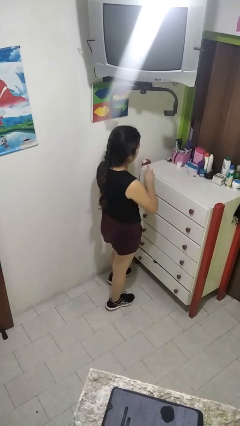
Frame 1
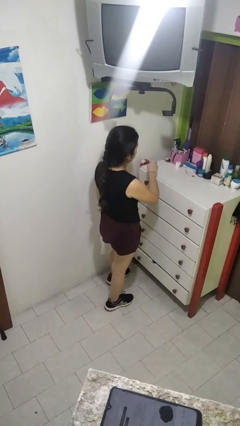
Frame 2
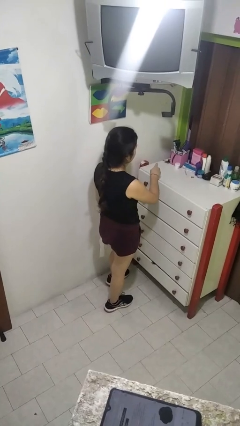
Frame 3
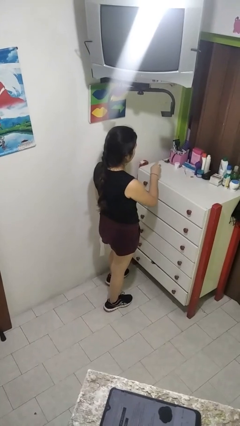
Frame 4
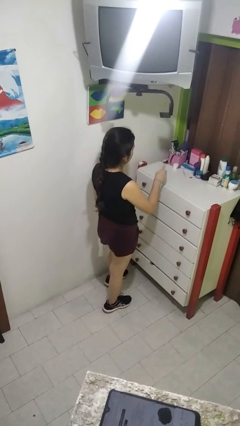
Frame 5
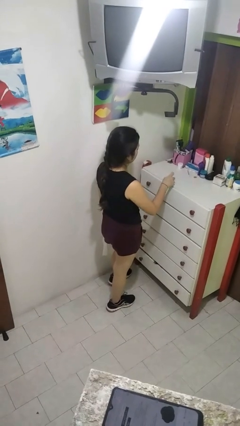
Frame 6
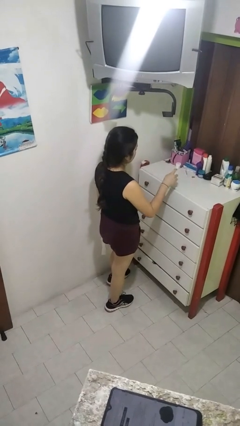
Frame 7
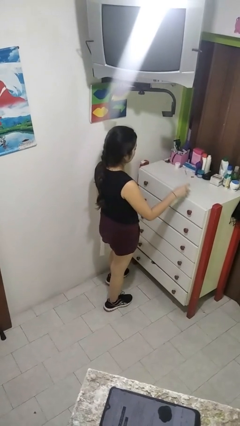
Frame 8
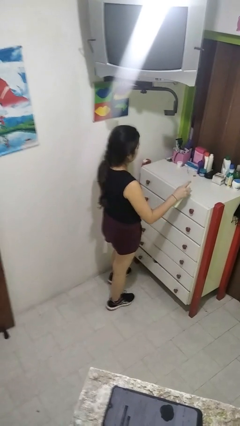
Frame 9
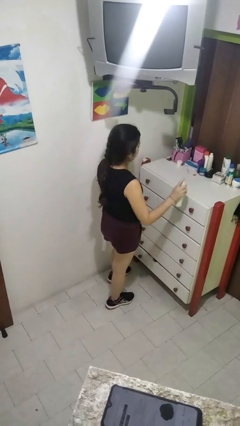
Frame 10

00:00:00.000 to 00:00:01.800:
person sprays from bottle

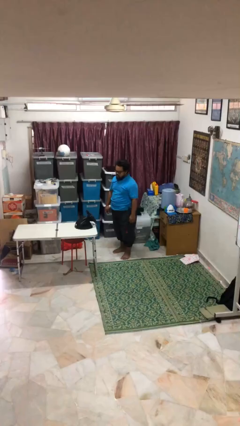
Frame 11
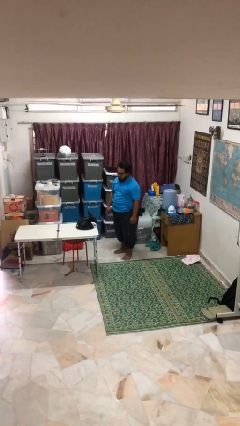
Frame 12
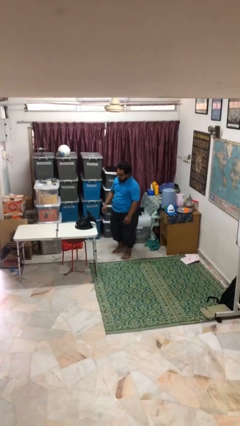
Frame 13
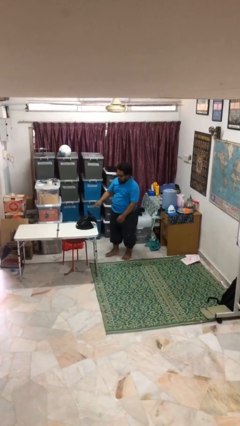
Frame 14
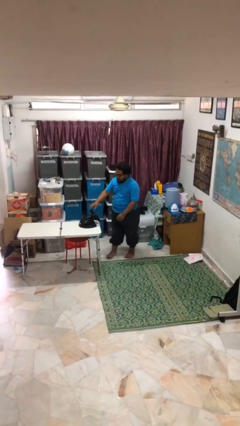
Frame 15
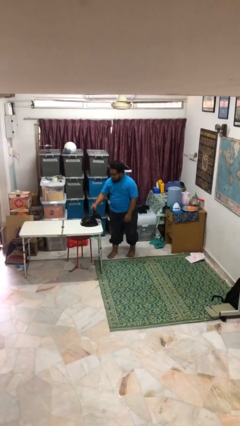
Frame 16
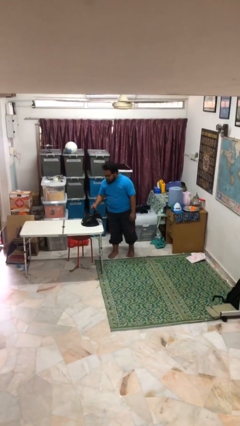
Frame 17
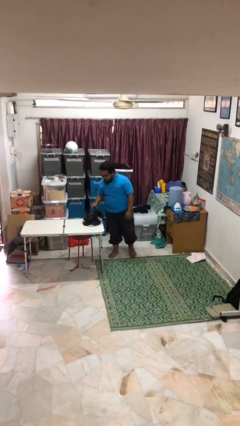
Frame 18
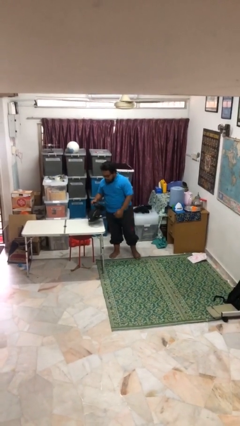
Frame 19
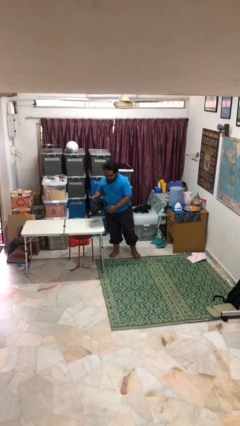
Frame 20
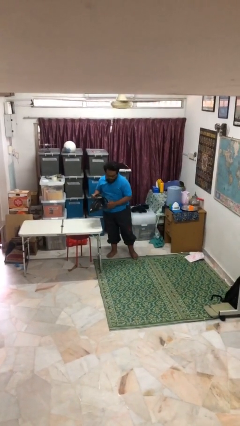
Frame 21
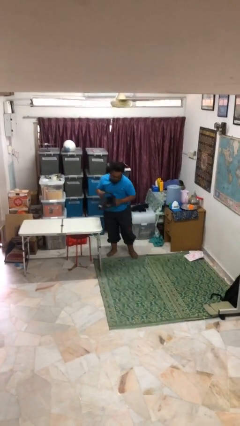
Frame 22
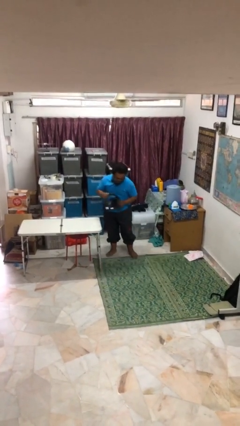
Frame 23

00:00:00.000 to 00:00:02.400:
person picks up object from table

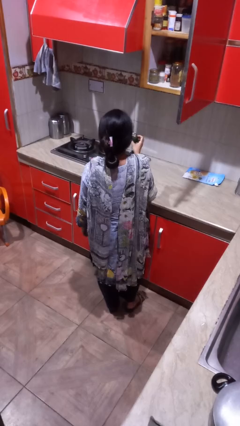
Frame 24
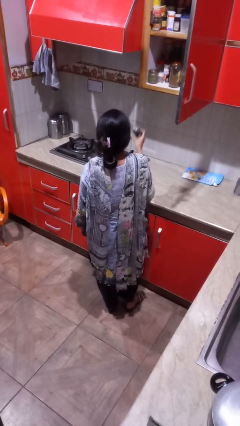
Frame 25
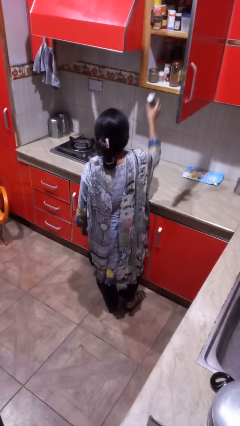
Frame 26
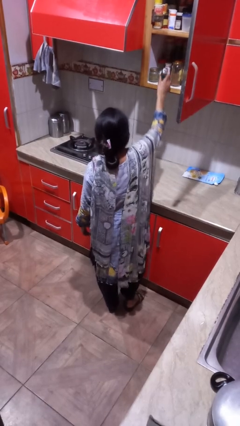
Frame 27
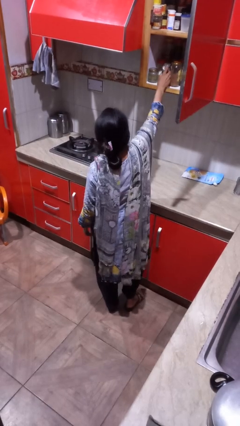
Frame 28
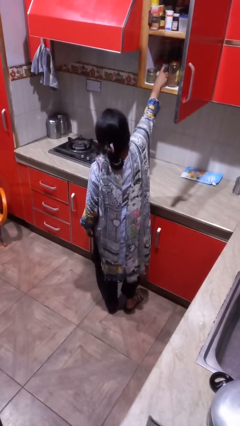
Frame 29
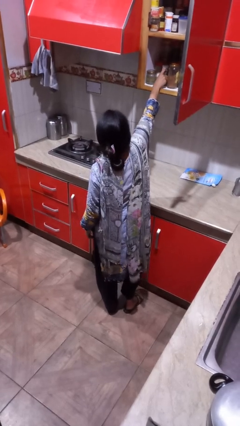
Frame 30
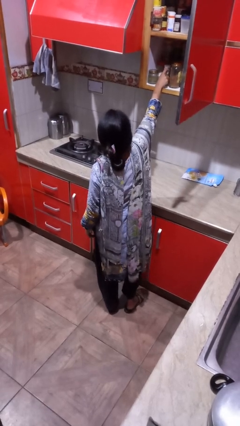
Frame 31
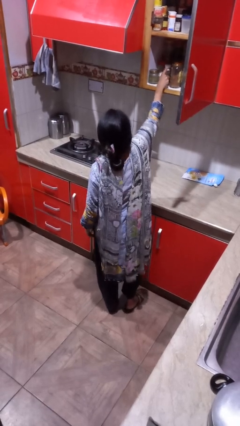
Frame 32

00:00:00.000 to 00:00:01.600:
person puts object in cabinet

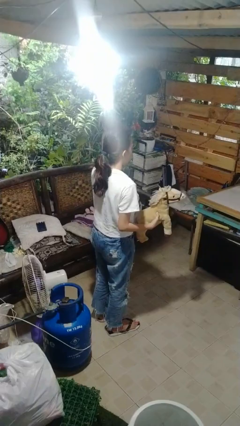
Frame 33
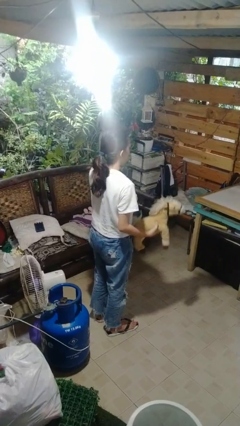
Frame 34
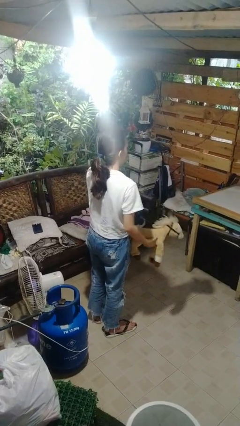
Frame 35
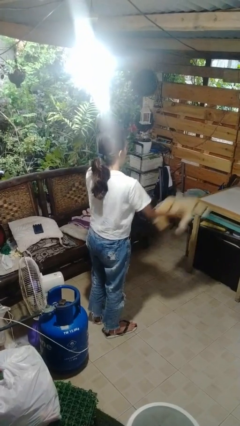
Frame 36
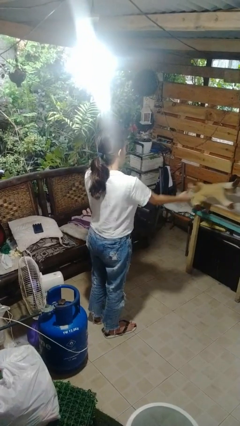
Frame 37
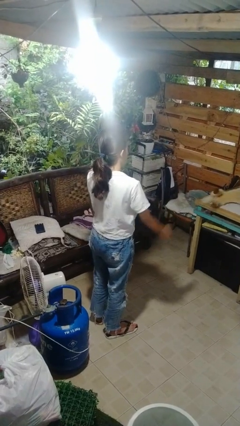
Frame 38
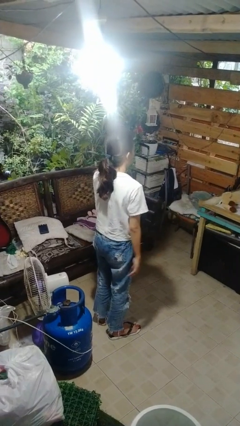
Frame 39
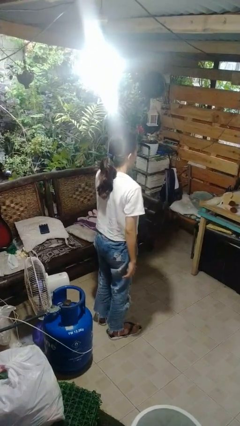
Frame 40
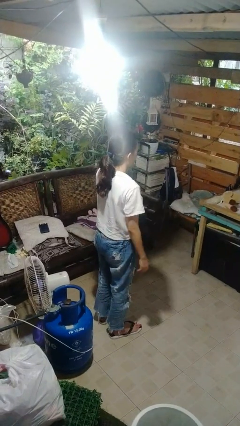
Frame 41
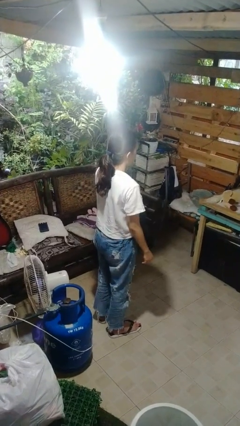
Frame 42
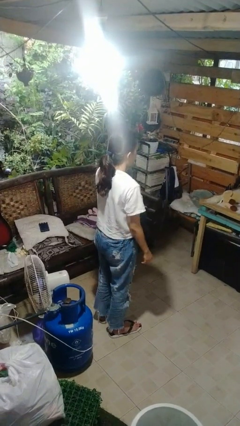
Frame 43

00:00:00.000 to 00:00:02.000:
person throws object on table

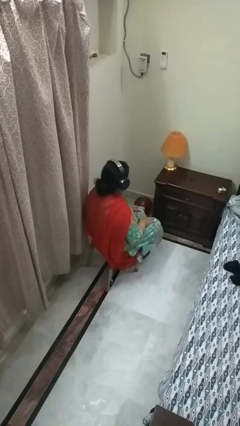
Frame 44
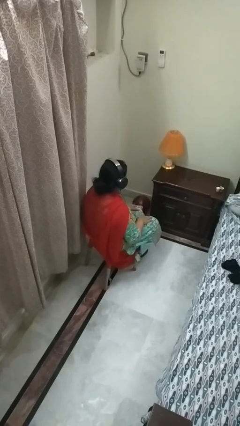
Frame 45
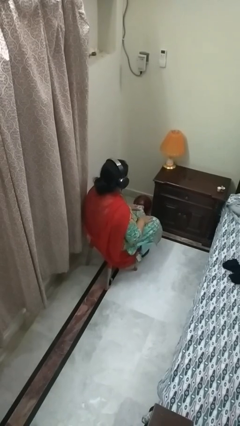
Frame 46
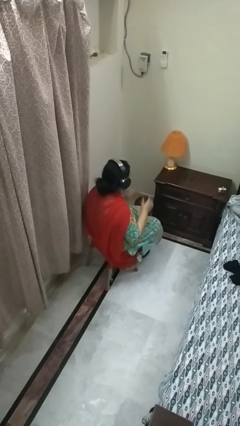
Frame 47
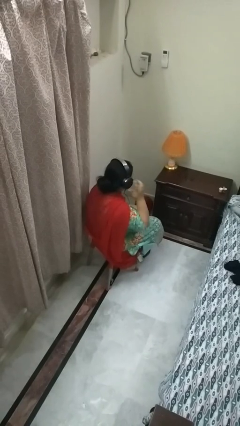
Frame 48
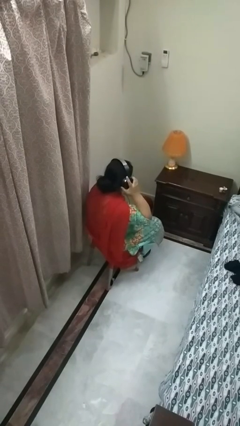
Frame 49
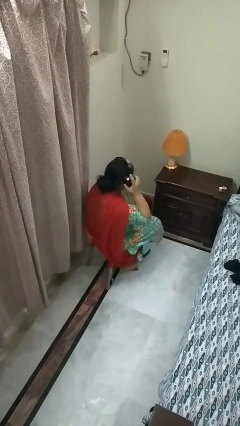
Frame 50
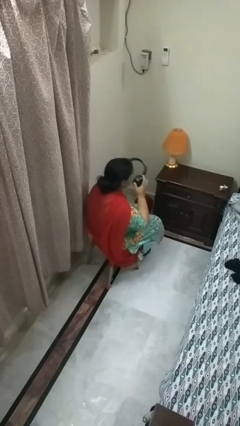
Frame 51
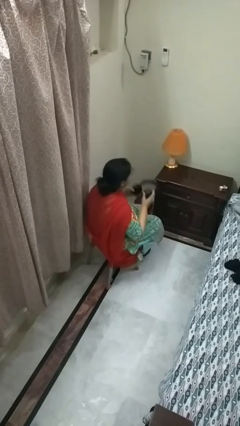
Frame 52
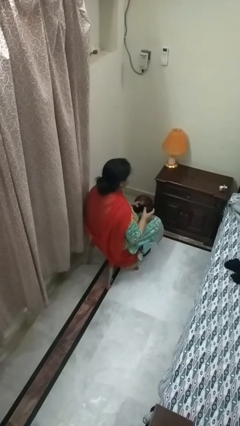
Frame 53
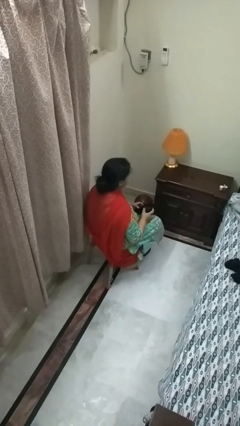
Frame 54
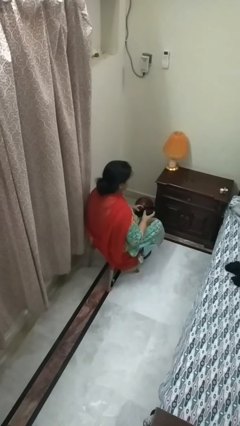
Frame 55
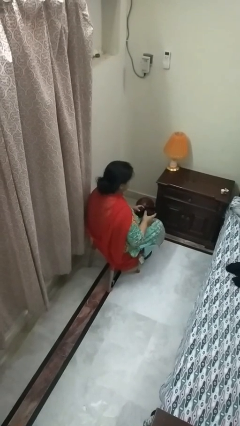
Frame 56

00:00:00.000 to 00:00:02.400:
person takes off headphones

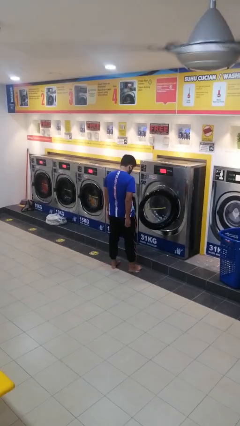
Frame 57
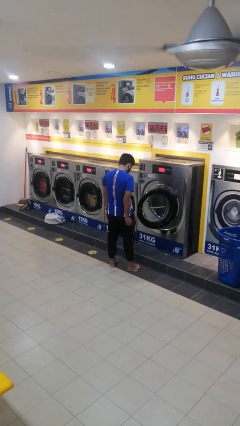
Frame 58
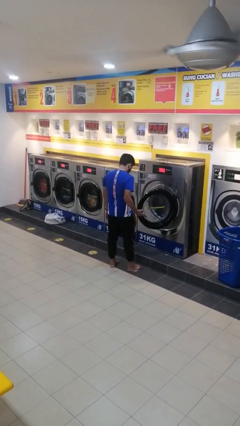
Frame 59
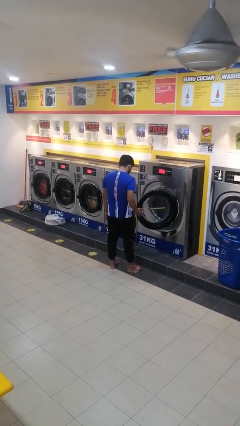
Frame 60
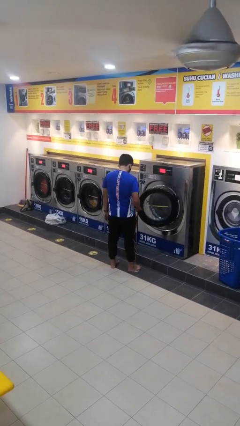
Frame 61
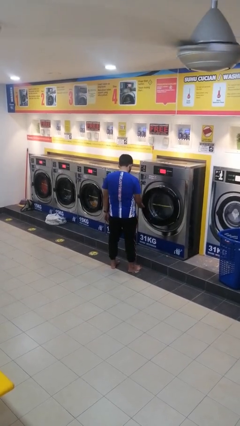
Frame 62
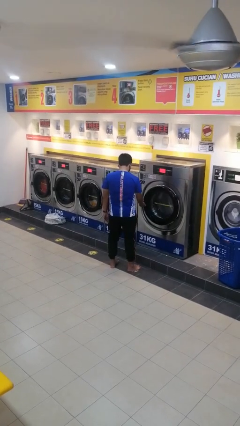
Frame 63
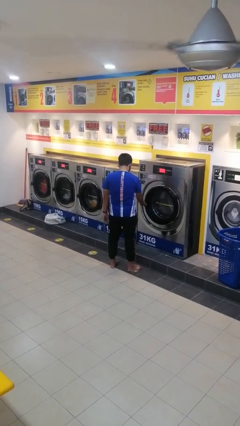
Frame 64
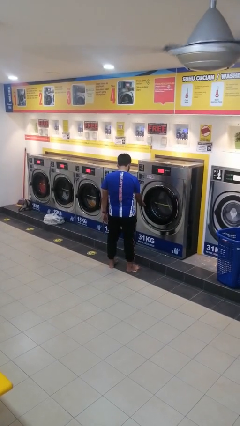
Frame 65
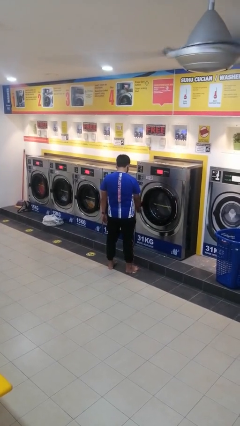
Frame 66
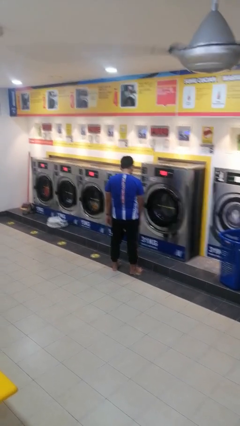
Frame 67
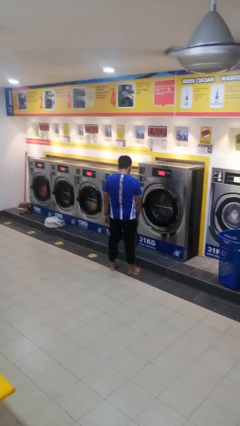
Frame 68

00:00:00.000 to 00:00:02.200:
person closes clothes washer

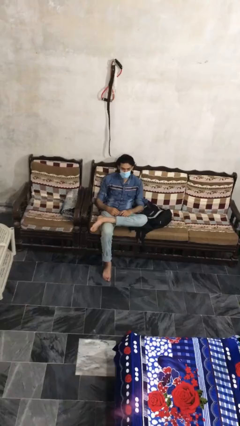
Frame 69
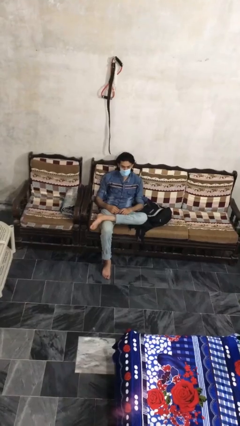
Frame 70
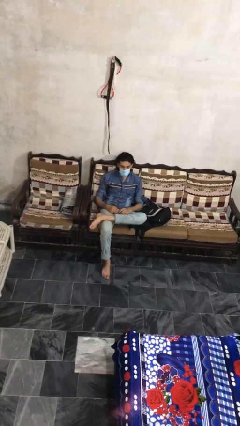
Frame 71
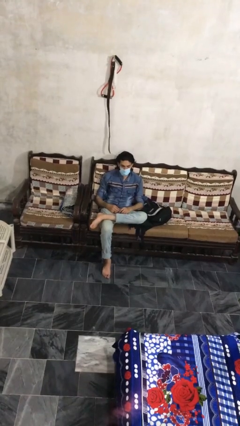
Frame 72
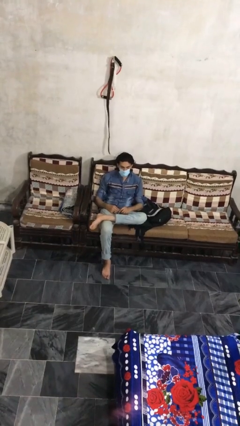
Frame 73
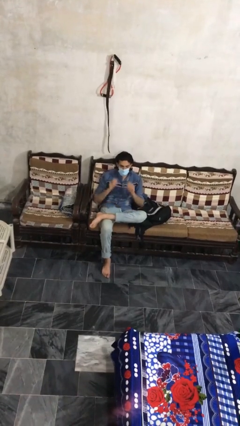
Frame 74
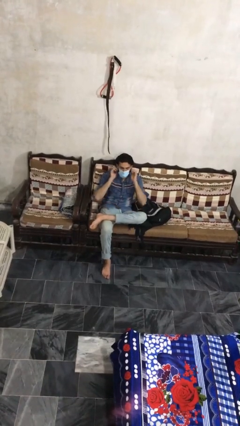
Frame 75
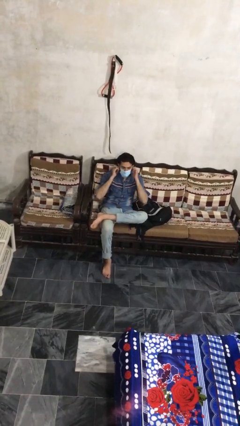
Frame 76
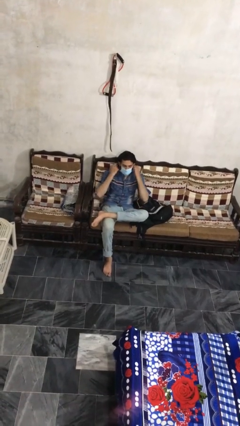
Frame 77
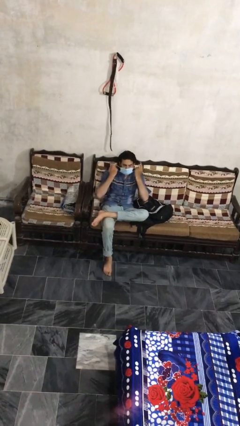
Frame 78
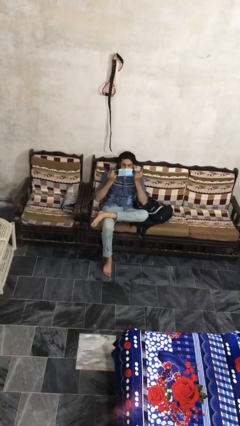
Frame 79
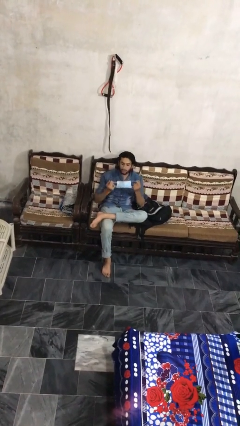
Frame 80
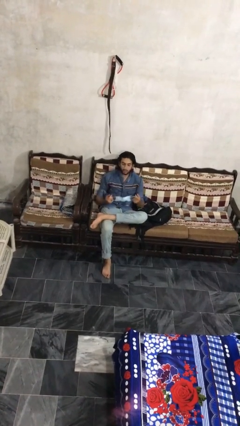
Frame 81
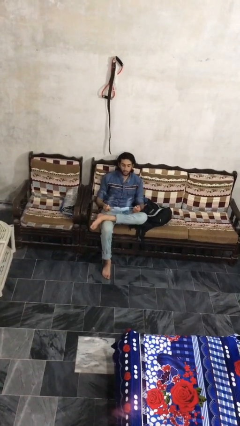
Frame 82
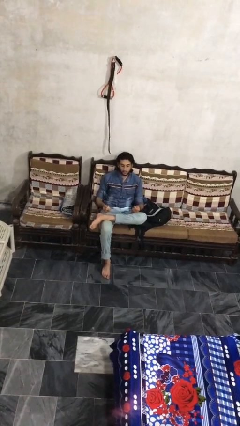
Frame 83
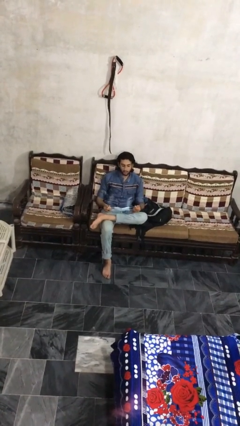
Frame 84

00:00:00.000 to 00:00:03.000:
person takes off facemask

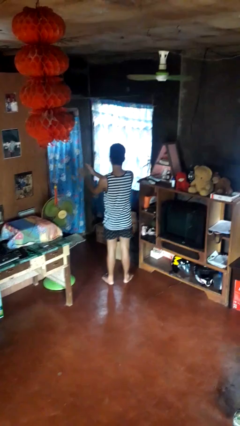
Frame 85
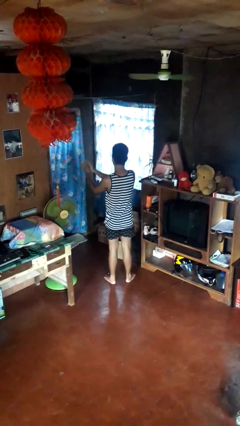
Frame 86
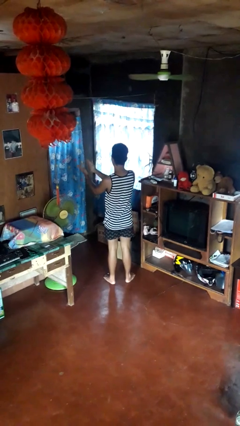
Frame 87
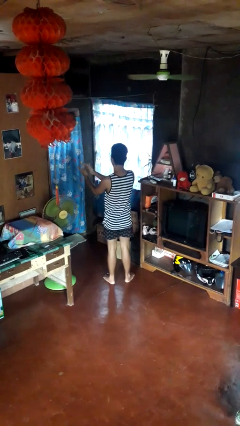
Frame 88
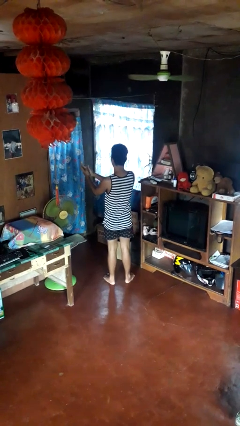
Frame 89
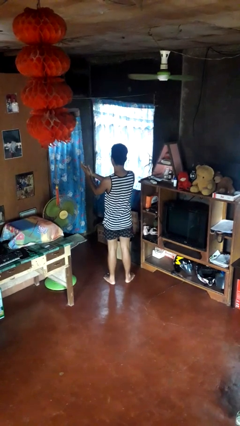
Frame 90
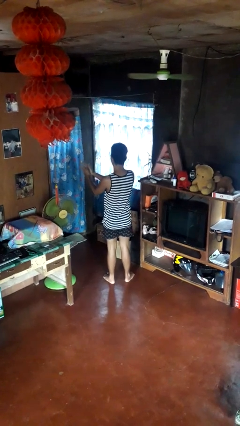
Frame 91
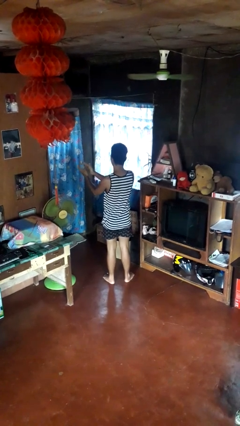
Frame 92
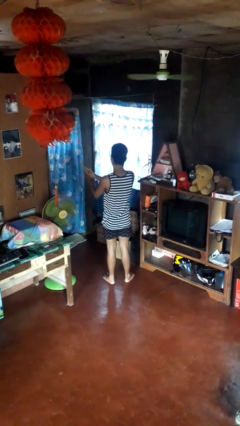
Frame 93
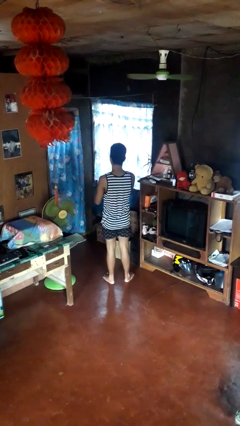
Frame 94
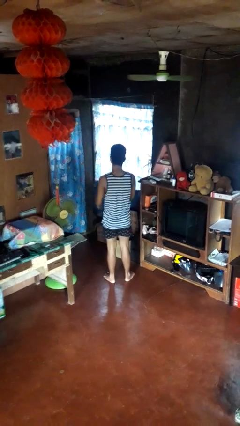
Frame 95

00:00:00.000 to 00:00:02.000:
person claps hands
